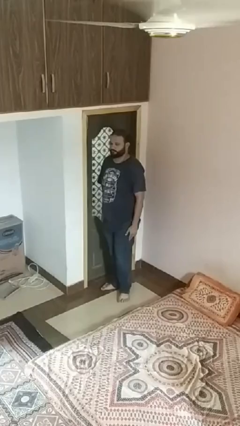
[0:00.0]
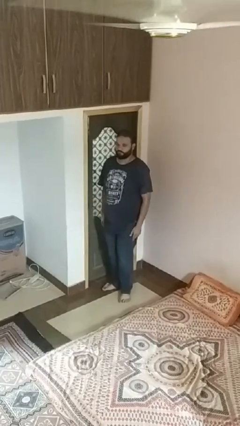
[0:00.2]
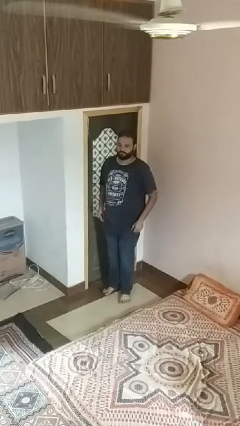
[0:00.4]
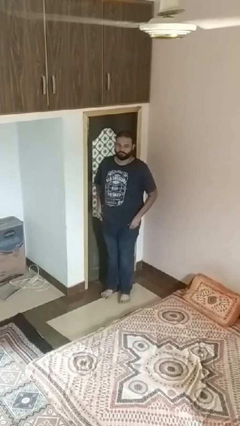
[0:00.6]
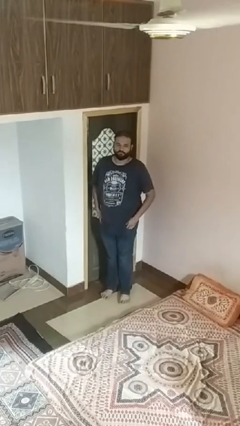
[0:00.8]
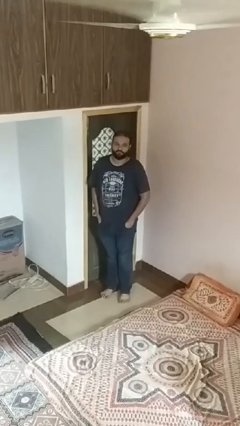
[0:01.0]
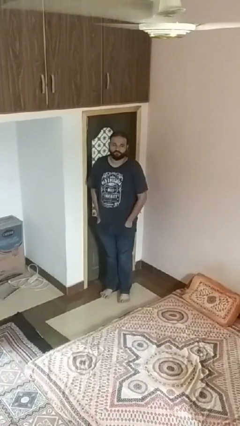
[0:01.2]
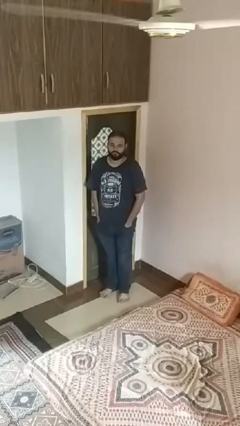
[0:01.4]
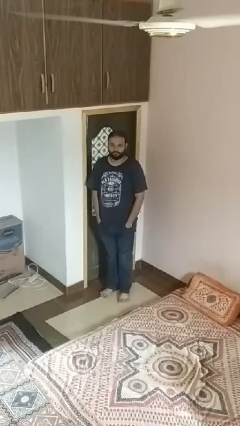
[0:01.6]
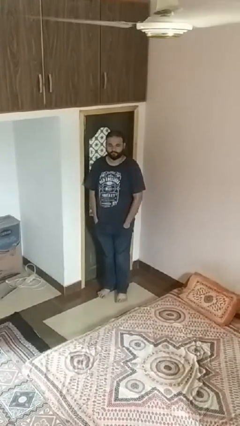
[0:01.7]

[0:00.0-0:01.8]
person puts hands in back pockets

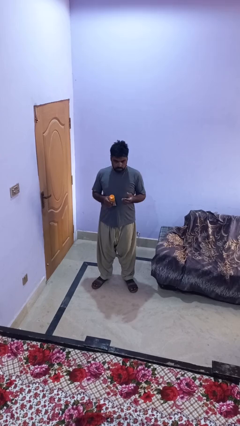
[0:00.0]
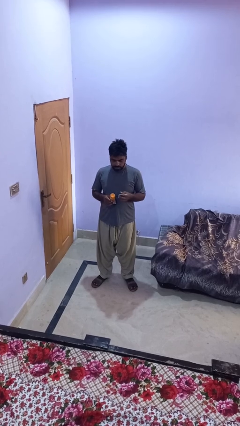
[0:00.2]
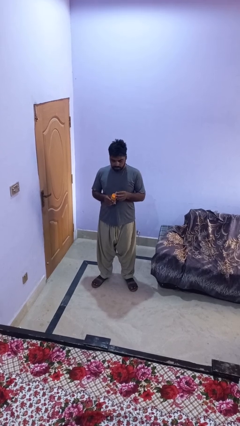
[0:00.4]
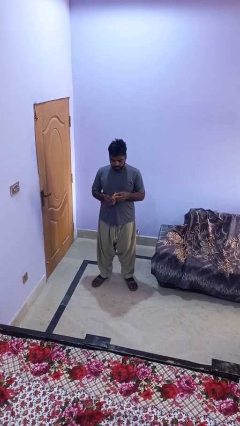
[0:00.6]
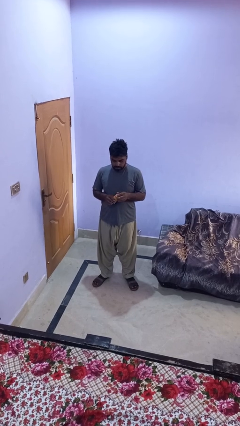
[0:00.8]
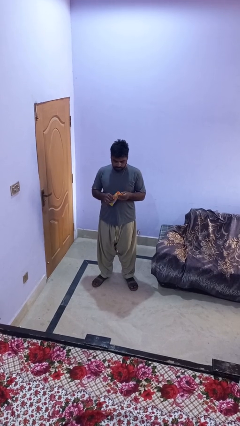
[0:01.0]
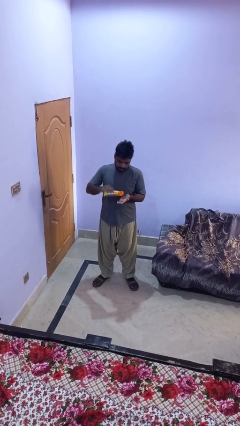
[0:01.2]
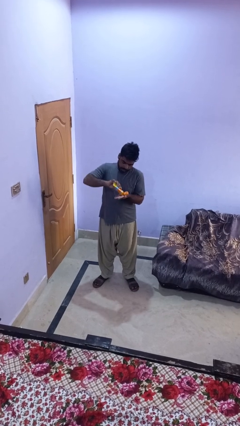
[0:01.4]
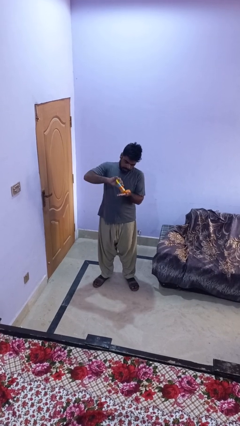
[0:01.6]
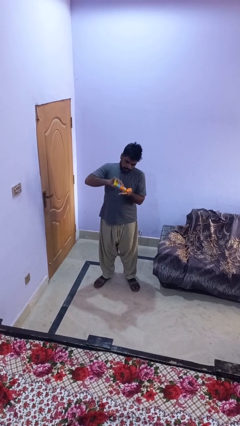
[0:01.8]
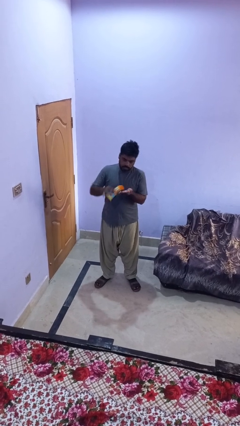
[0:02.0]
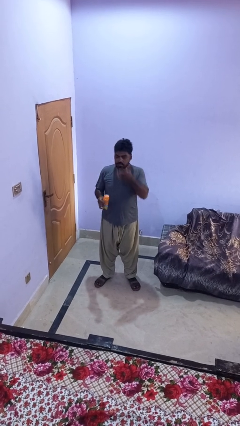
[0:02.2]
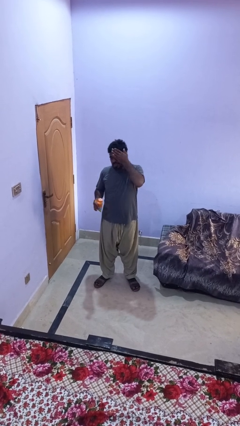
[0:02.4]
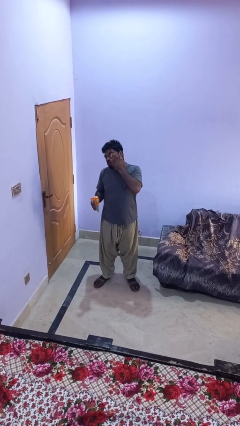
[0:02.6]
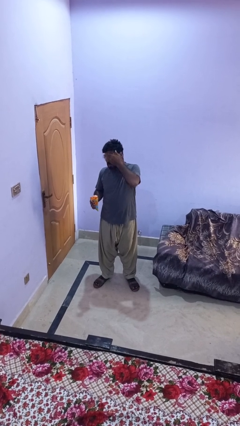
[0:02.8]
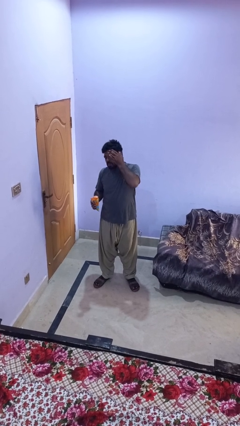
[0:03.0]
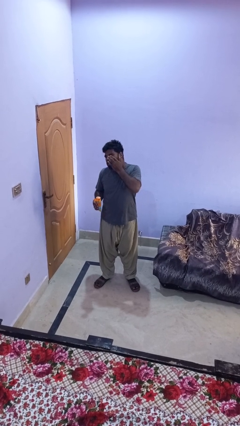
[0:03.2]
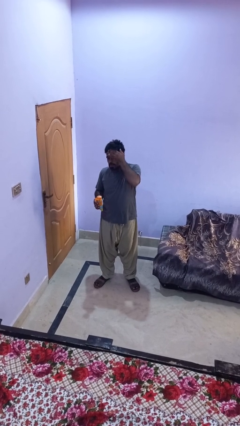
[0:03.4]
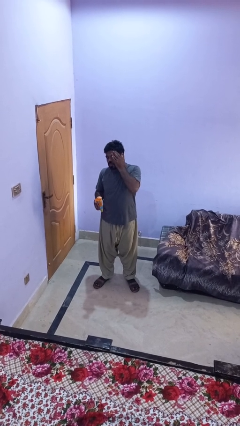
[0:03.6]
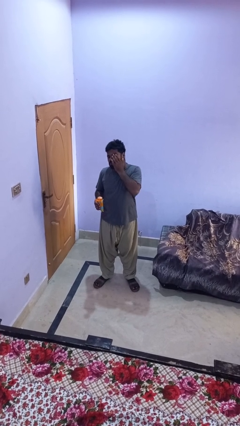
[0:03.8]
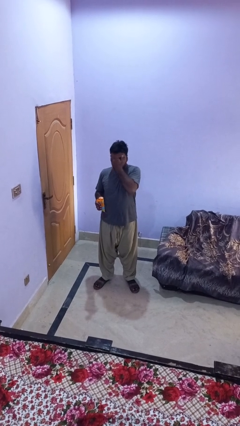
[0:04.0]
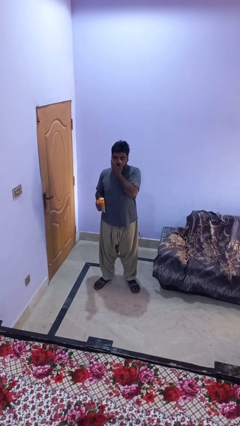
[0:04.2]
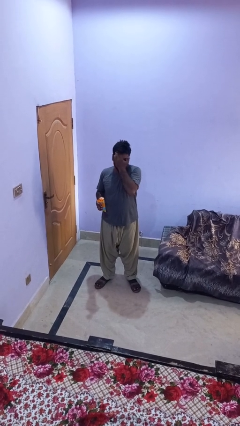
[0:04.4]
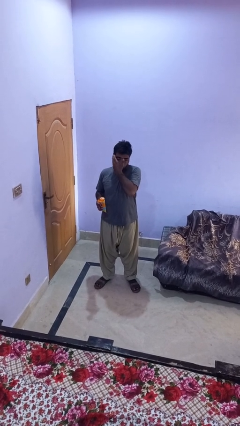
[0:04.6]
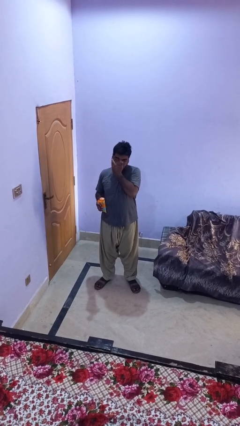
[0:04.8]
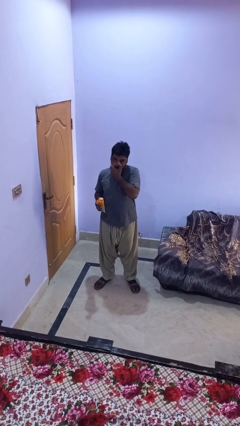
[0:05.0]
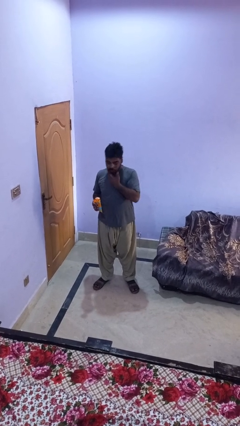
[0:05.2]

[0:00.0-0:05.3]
person applies facial moisturizer

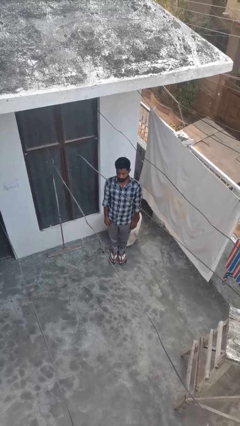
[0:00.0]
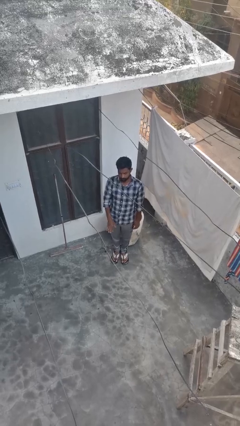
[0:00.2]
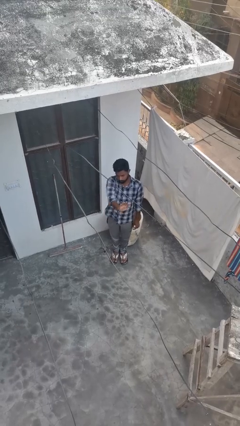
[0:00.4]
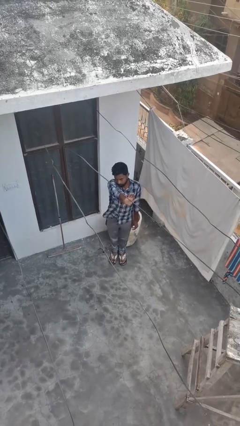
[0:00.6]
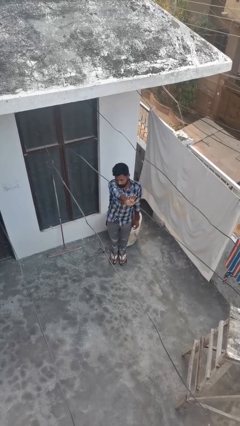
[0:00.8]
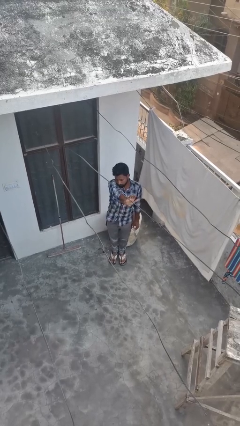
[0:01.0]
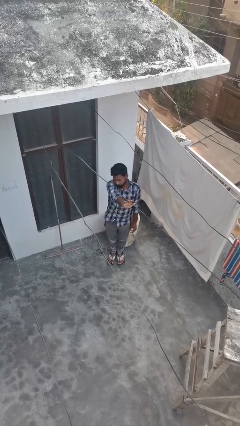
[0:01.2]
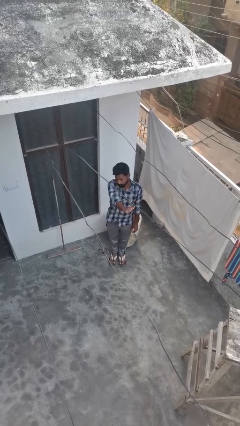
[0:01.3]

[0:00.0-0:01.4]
person gestures stop

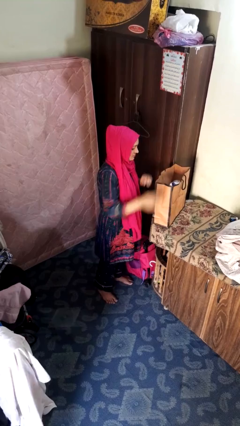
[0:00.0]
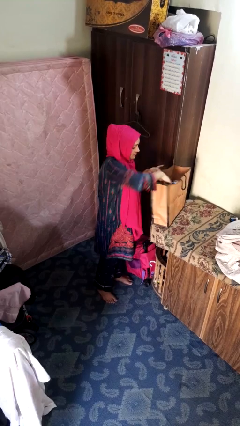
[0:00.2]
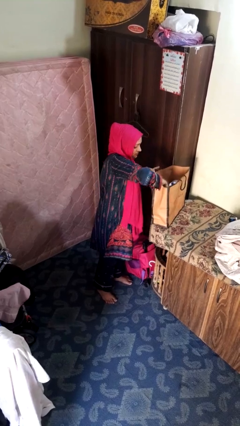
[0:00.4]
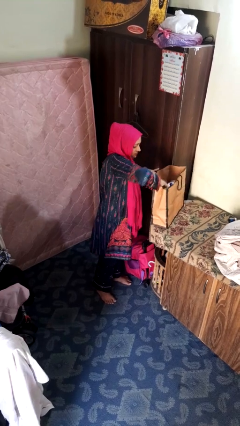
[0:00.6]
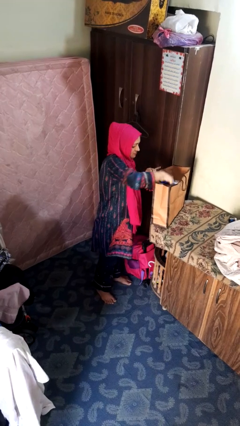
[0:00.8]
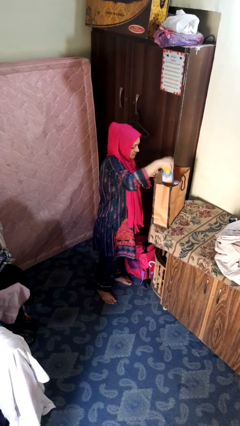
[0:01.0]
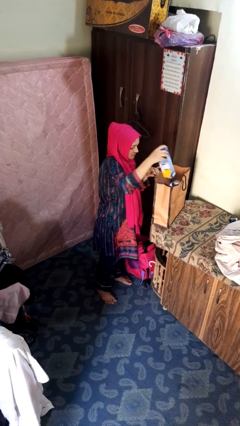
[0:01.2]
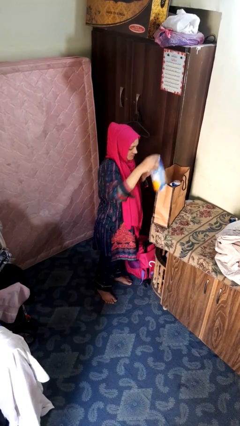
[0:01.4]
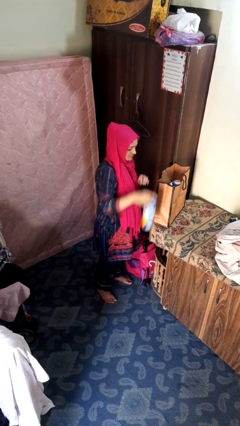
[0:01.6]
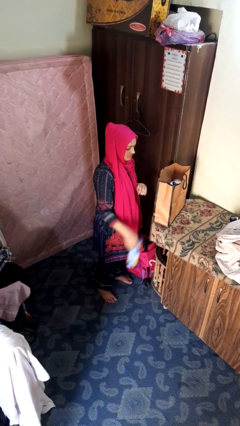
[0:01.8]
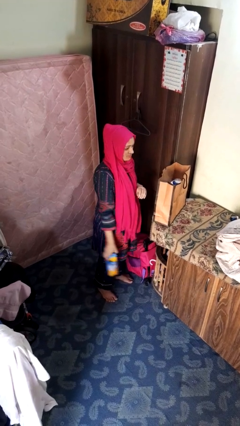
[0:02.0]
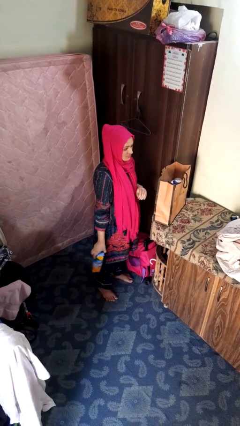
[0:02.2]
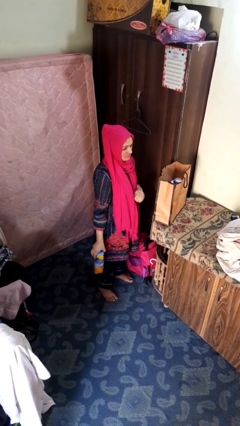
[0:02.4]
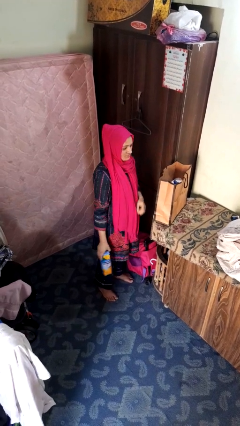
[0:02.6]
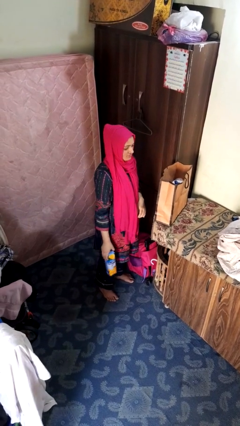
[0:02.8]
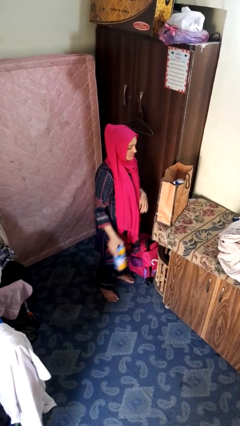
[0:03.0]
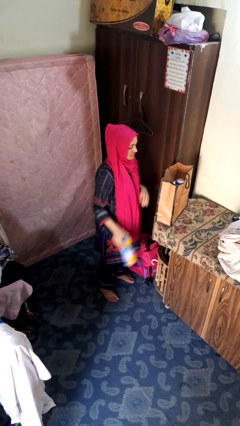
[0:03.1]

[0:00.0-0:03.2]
person takes object from bag

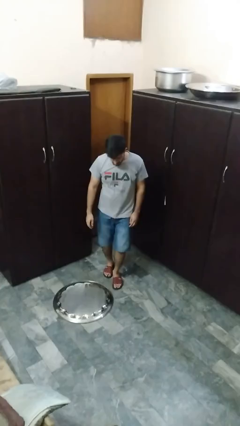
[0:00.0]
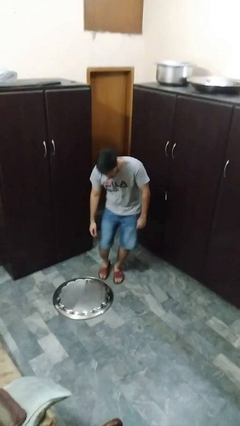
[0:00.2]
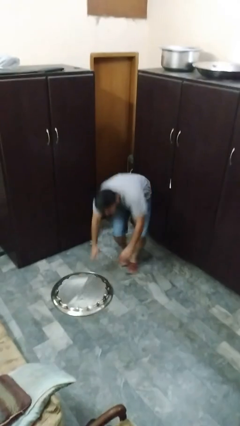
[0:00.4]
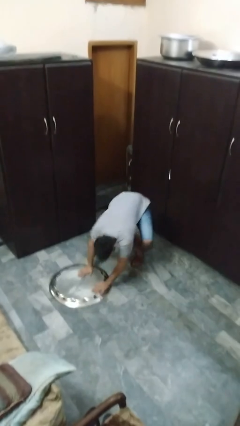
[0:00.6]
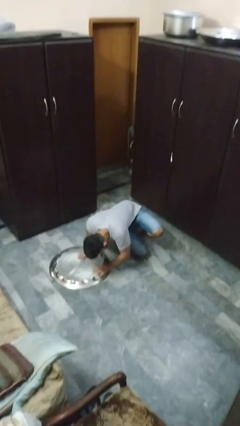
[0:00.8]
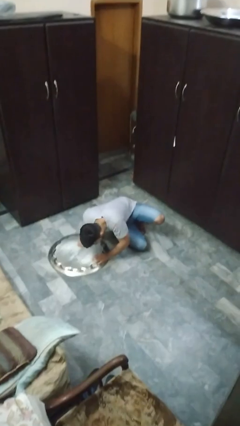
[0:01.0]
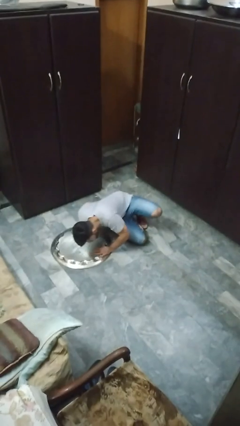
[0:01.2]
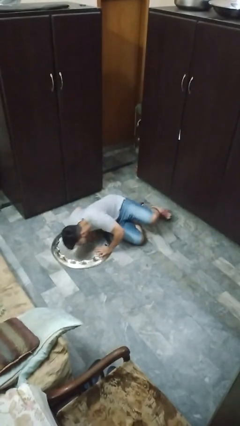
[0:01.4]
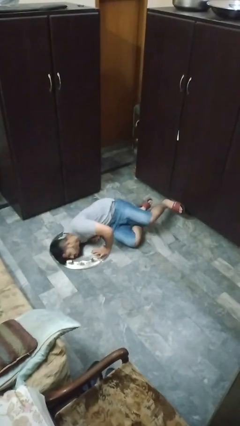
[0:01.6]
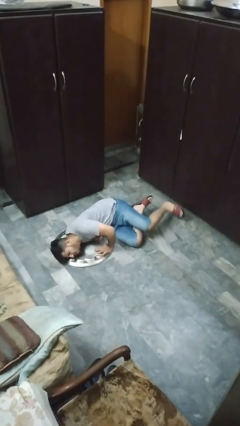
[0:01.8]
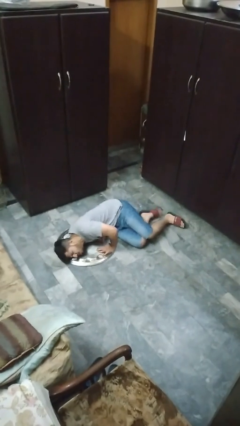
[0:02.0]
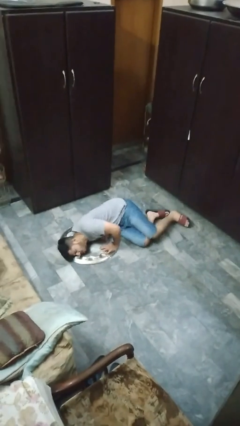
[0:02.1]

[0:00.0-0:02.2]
person trips on object on floor

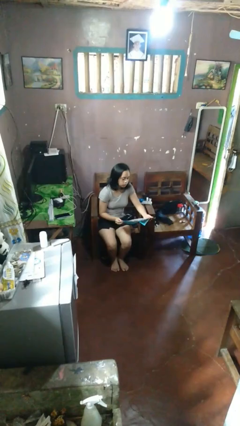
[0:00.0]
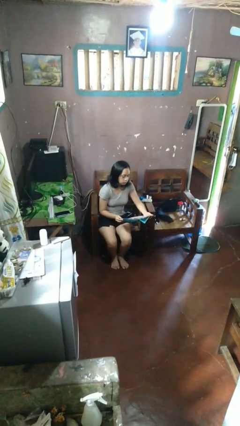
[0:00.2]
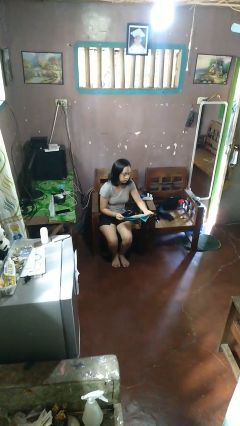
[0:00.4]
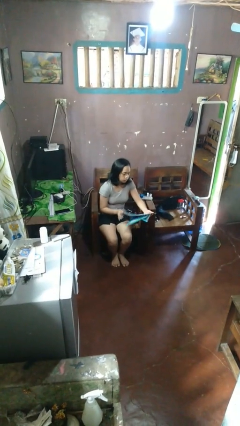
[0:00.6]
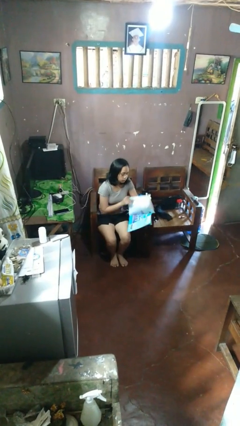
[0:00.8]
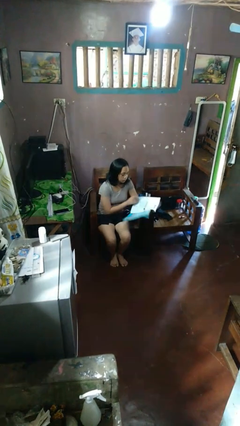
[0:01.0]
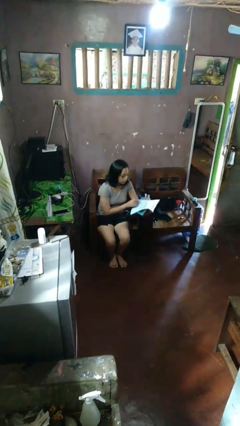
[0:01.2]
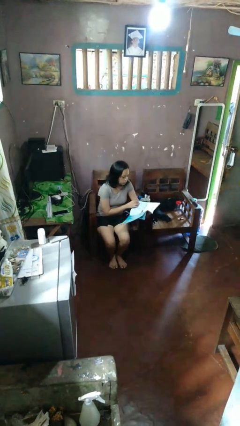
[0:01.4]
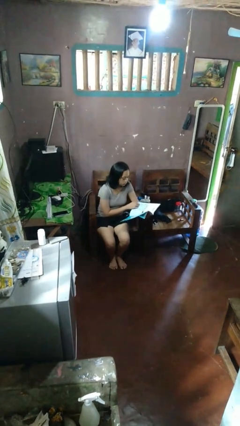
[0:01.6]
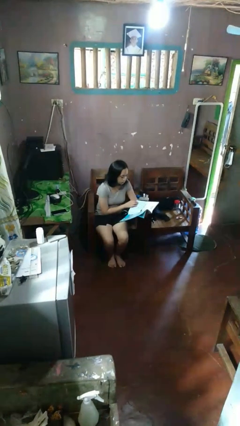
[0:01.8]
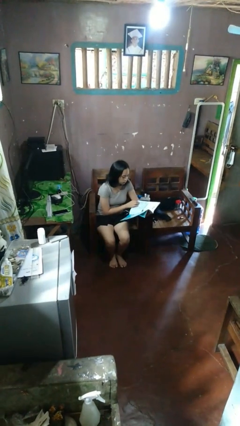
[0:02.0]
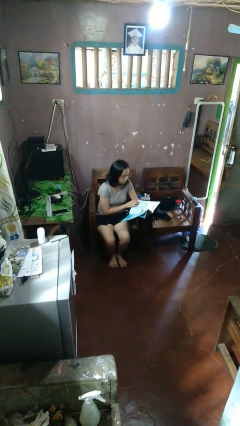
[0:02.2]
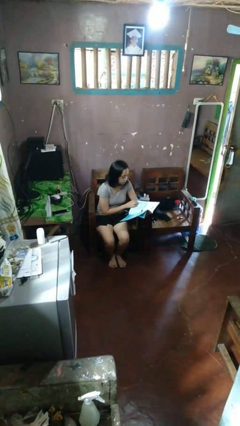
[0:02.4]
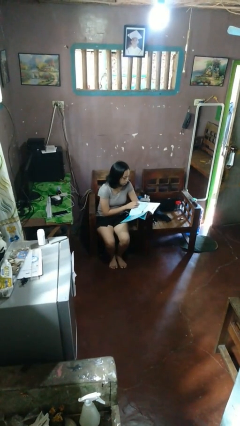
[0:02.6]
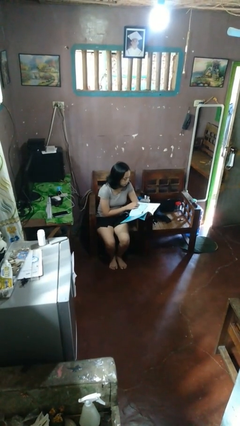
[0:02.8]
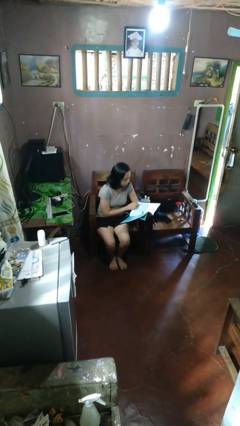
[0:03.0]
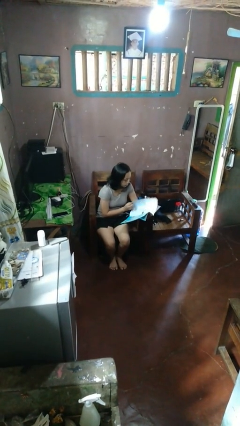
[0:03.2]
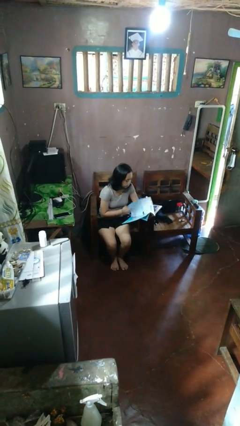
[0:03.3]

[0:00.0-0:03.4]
person reads magazine
